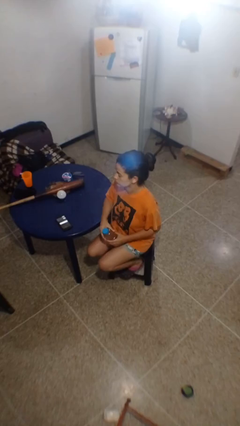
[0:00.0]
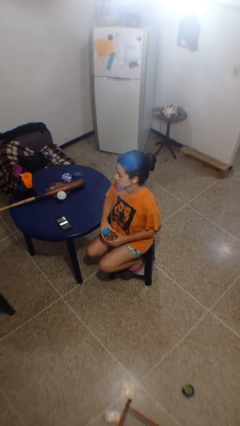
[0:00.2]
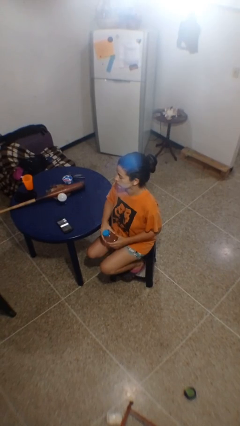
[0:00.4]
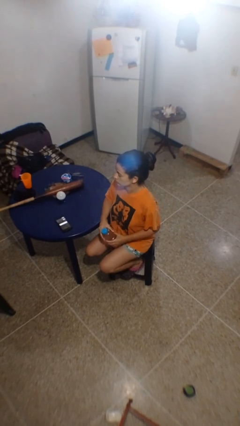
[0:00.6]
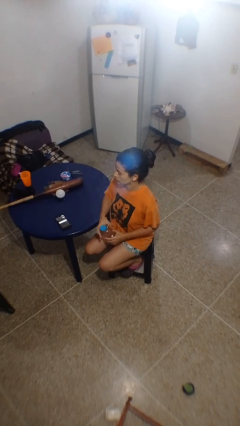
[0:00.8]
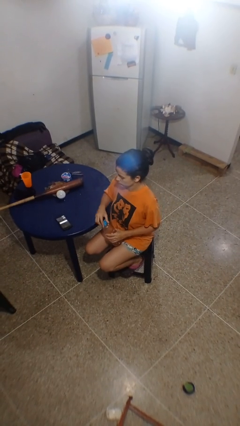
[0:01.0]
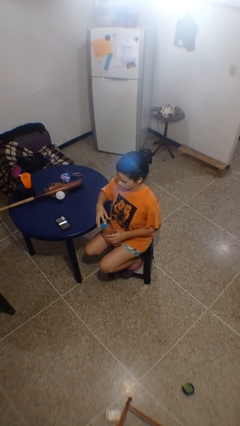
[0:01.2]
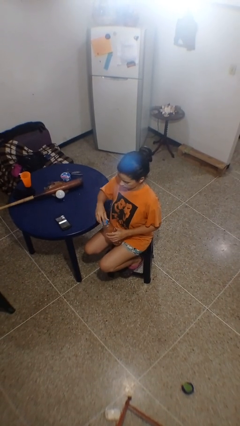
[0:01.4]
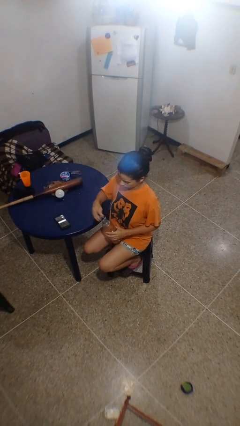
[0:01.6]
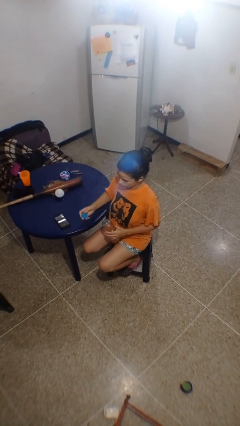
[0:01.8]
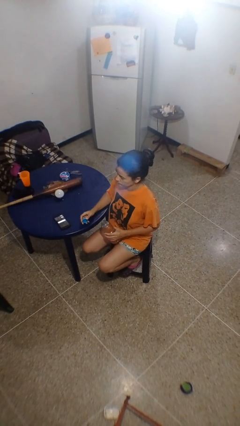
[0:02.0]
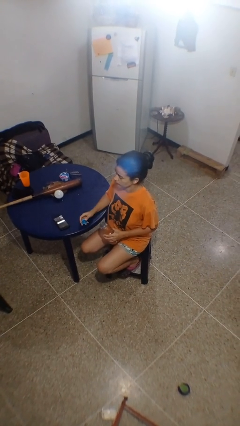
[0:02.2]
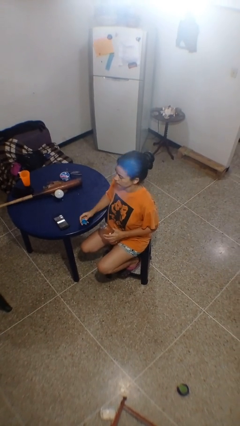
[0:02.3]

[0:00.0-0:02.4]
person unscrews lid from bottle

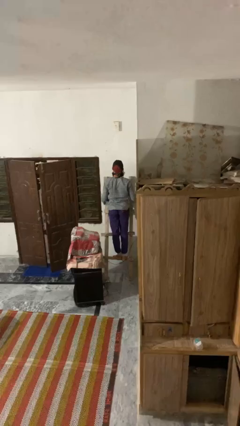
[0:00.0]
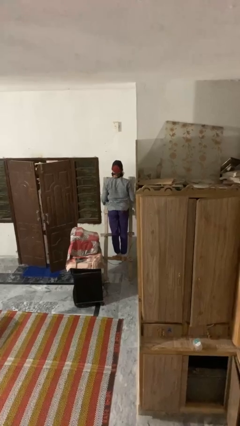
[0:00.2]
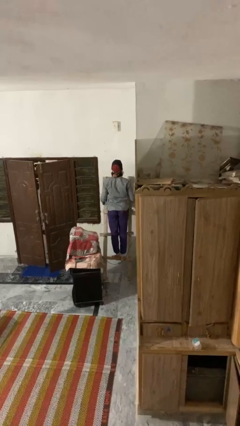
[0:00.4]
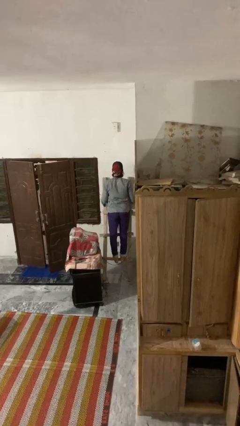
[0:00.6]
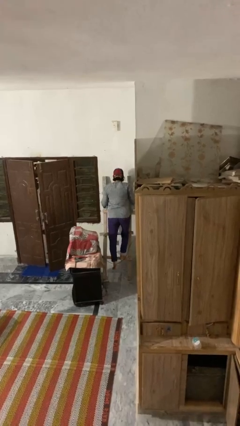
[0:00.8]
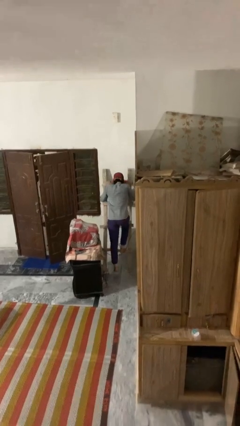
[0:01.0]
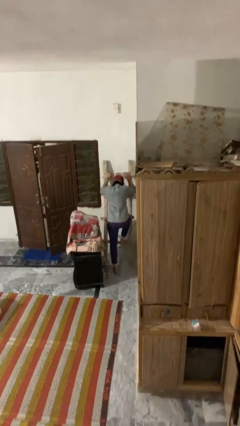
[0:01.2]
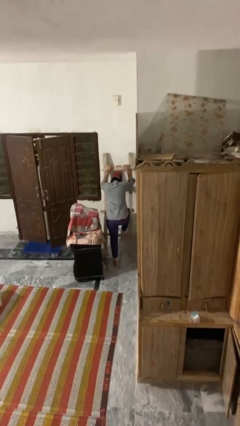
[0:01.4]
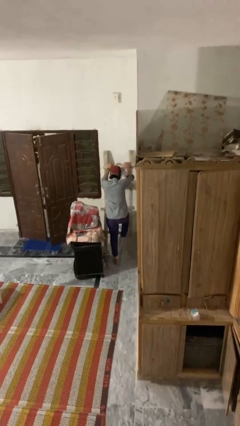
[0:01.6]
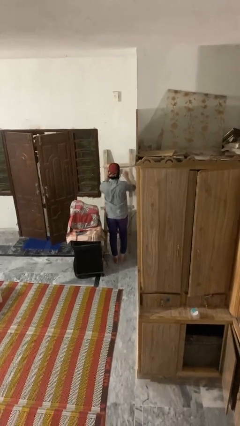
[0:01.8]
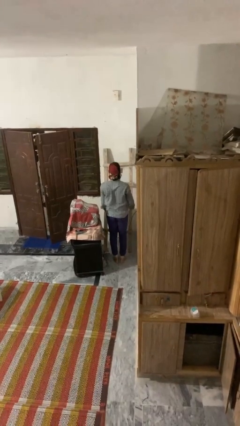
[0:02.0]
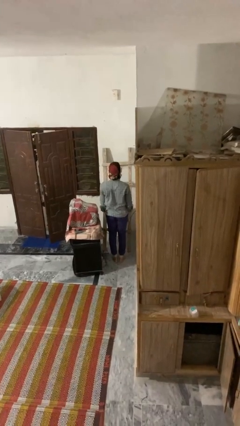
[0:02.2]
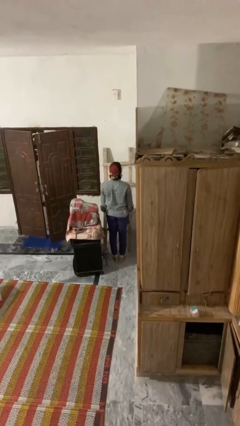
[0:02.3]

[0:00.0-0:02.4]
person climbs down ladder

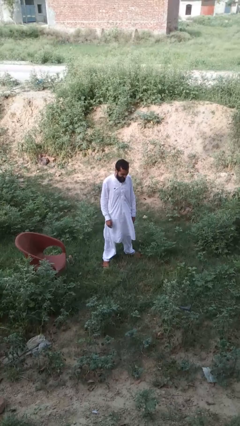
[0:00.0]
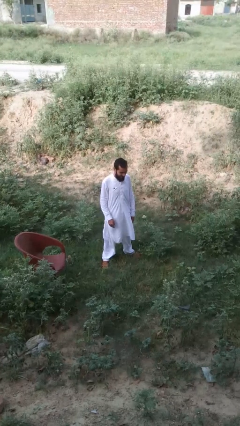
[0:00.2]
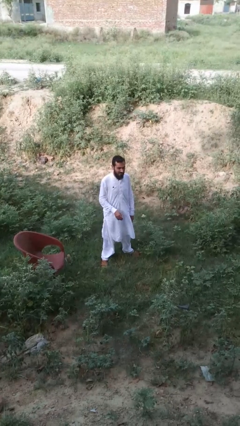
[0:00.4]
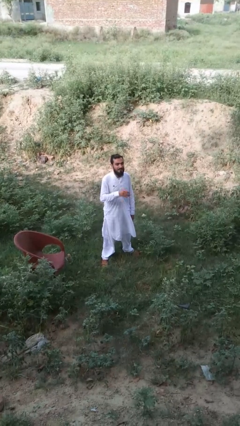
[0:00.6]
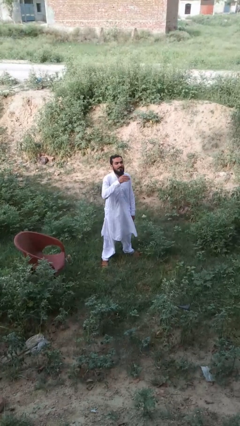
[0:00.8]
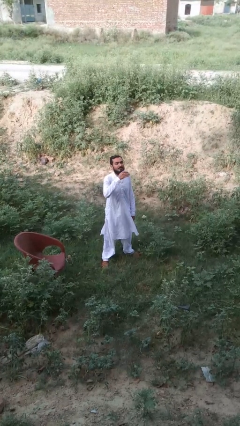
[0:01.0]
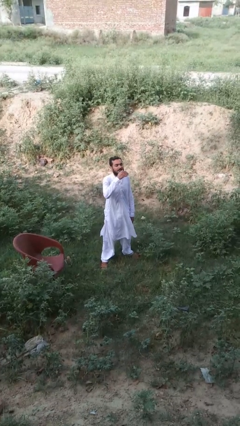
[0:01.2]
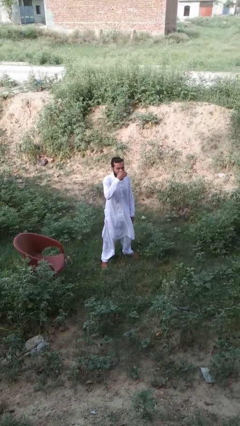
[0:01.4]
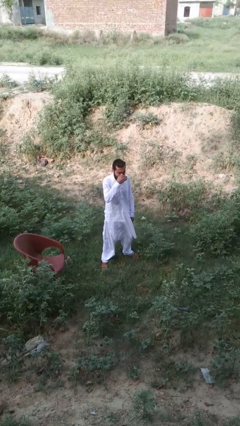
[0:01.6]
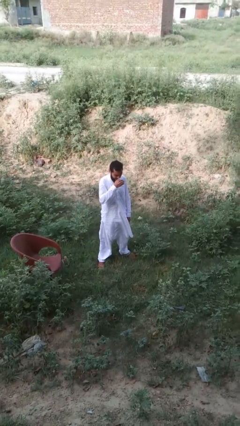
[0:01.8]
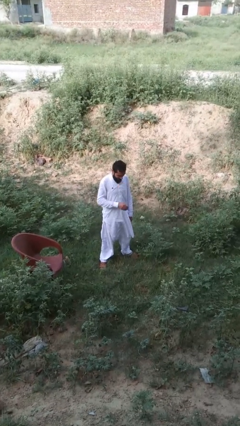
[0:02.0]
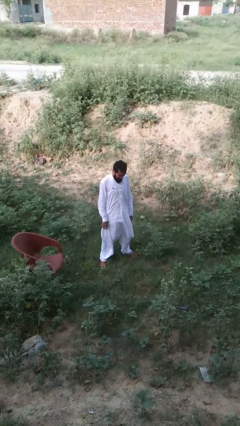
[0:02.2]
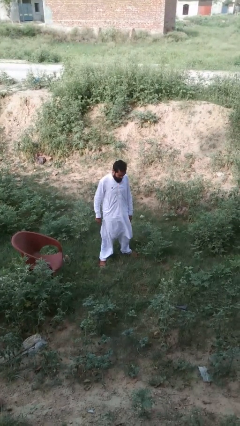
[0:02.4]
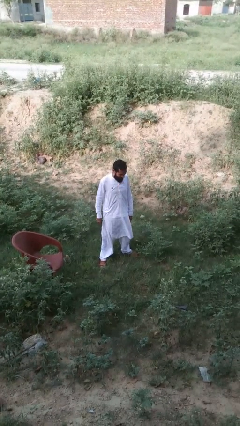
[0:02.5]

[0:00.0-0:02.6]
person sneezes into hand

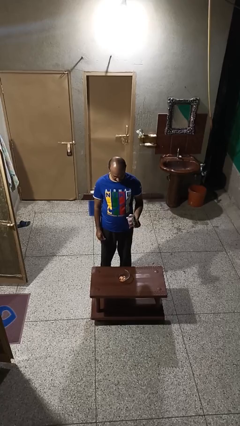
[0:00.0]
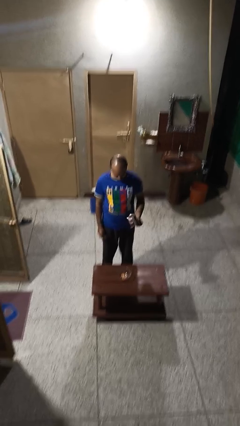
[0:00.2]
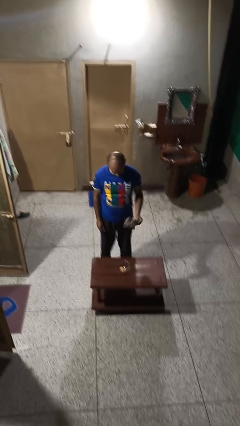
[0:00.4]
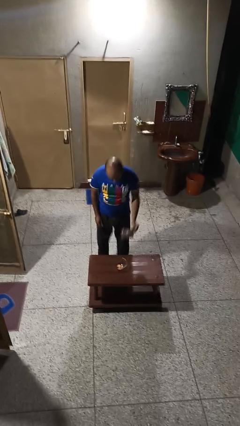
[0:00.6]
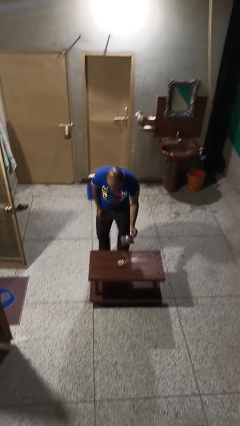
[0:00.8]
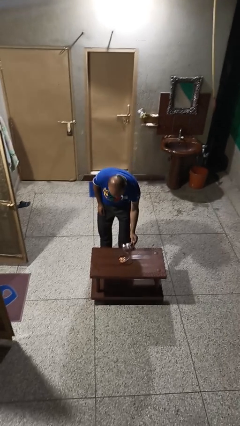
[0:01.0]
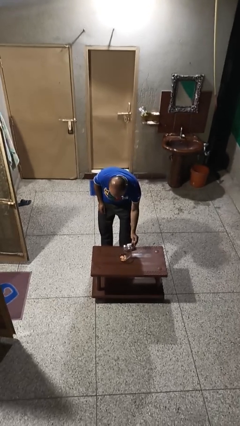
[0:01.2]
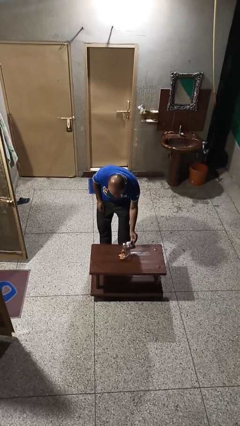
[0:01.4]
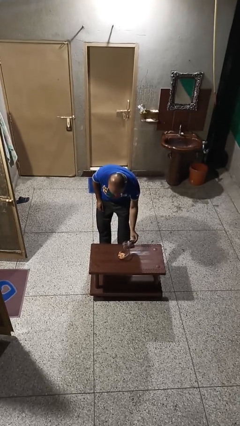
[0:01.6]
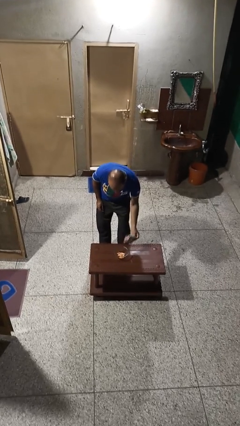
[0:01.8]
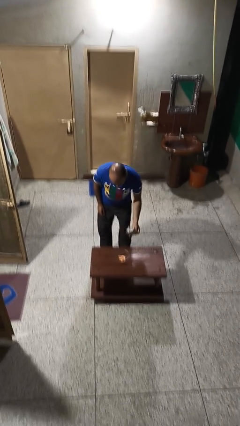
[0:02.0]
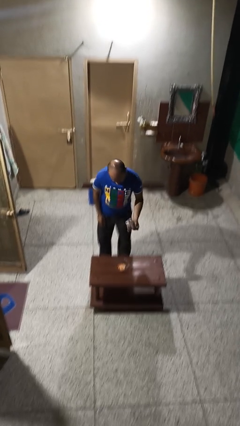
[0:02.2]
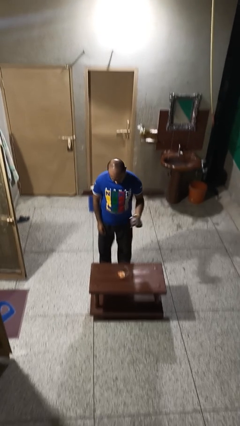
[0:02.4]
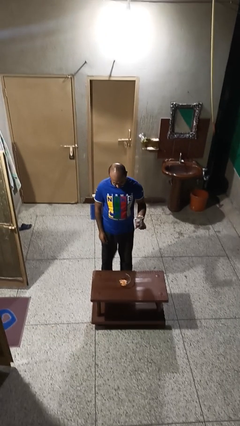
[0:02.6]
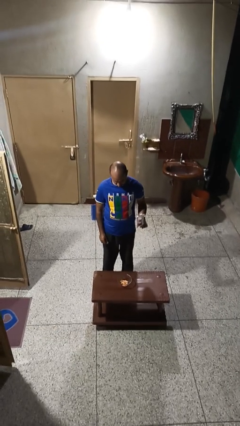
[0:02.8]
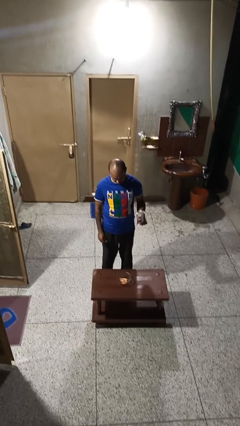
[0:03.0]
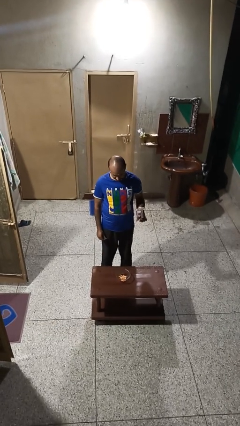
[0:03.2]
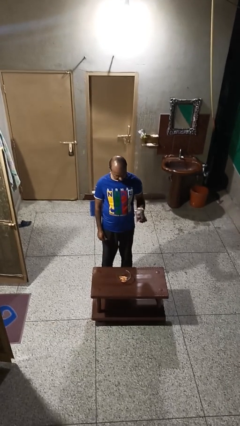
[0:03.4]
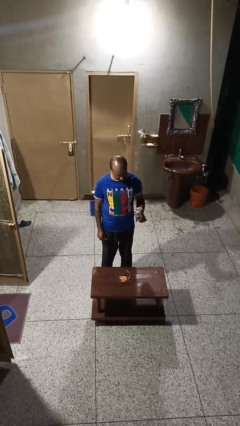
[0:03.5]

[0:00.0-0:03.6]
person pours into bowl

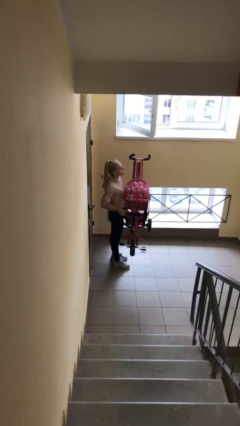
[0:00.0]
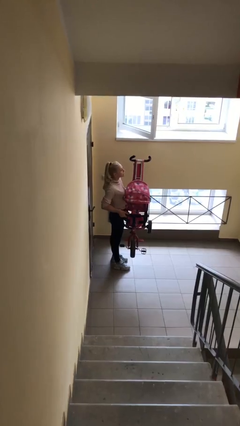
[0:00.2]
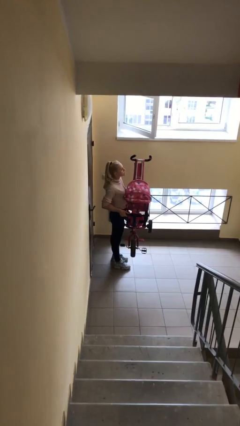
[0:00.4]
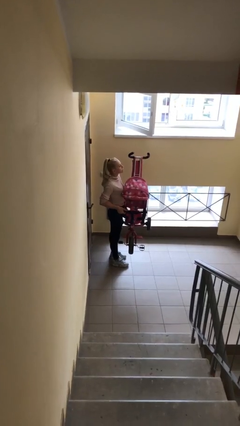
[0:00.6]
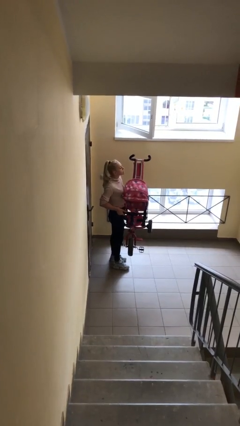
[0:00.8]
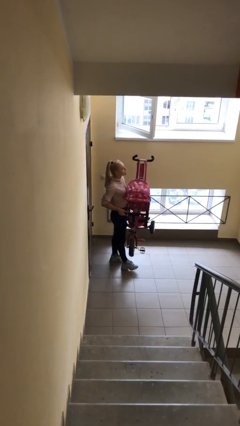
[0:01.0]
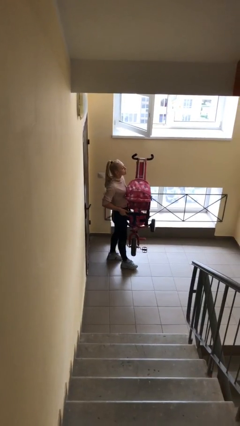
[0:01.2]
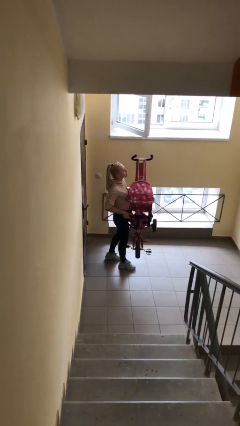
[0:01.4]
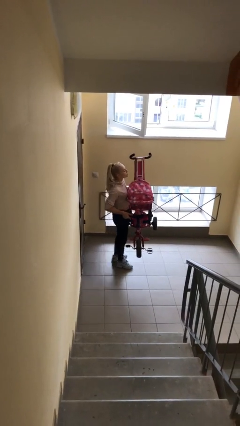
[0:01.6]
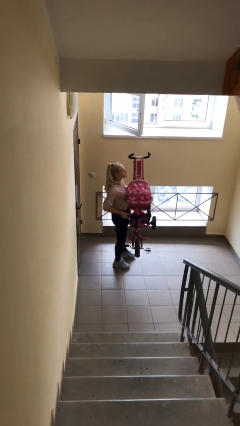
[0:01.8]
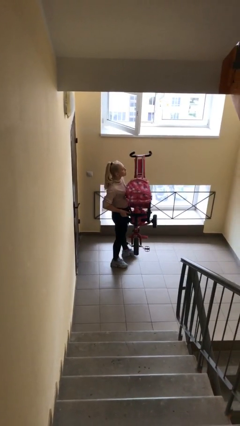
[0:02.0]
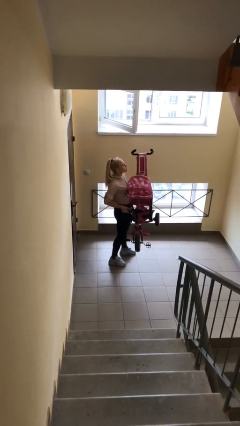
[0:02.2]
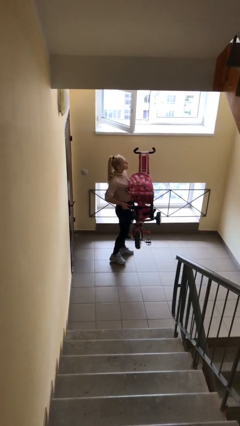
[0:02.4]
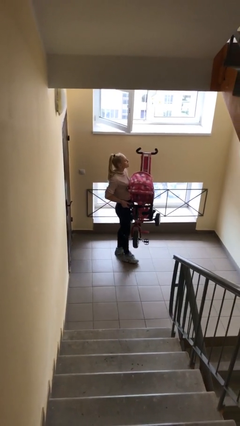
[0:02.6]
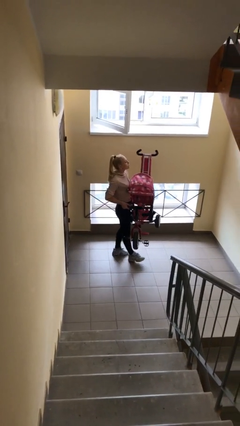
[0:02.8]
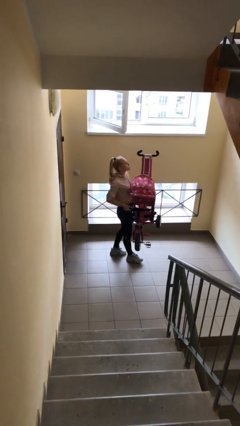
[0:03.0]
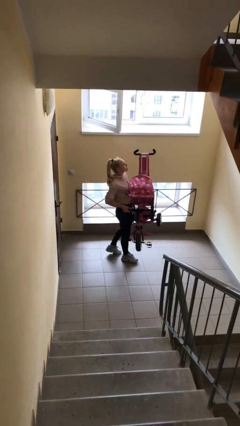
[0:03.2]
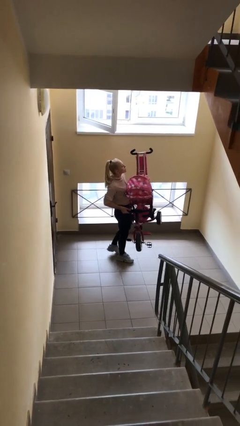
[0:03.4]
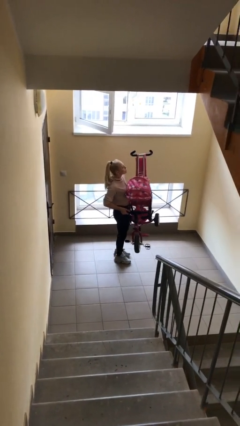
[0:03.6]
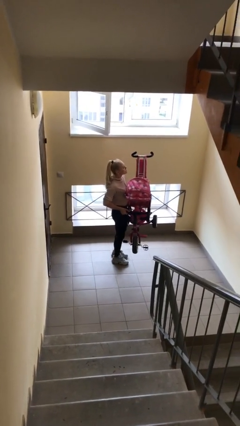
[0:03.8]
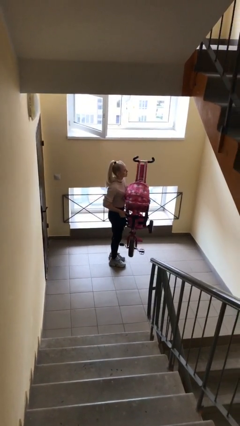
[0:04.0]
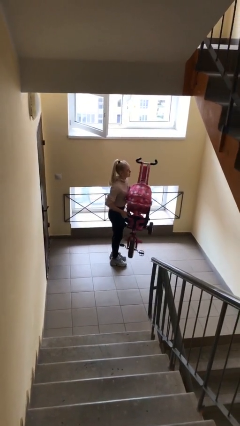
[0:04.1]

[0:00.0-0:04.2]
person carries heavy object

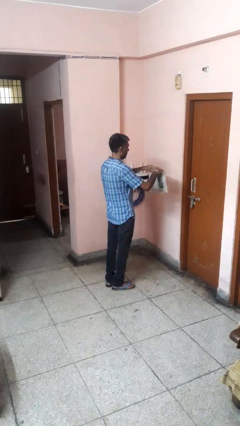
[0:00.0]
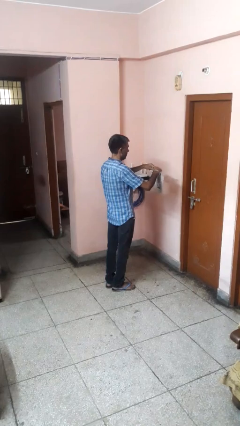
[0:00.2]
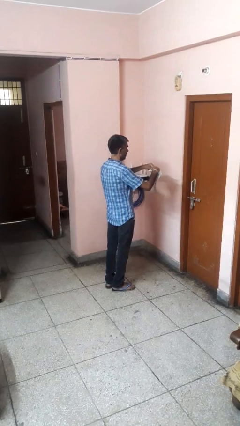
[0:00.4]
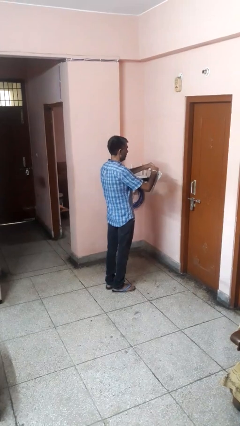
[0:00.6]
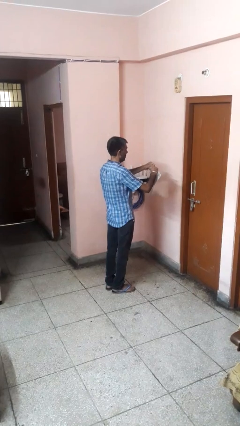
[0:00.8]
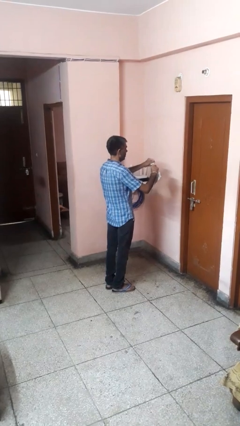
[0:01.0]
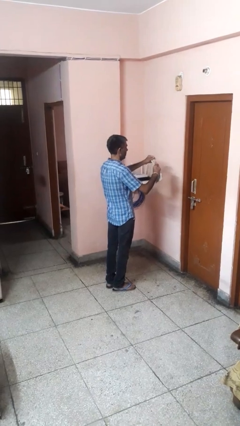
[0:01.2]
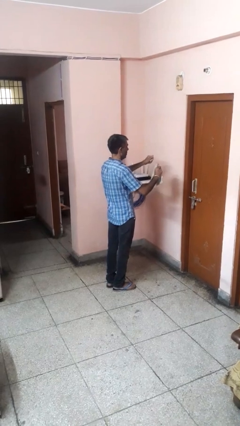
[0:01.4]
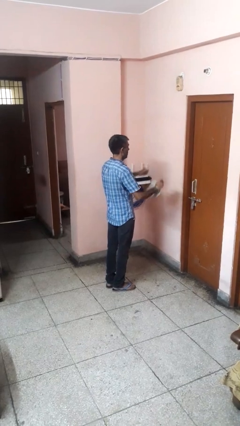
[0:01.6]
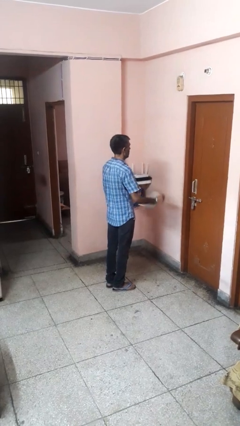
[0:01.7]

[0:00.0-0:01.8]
person tears paper

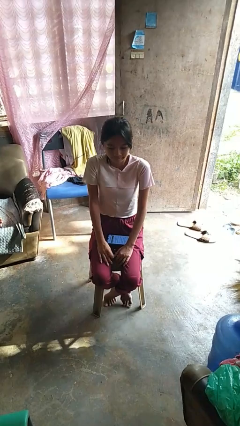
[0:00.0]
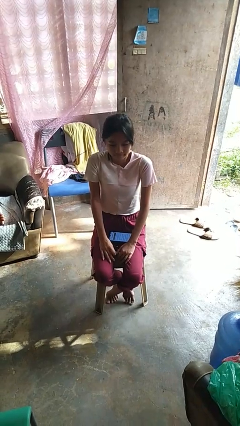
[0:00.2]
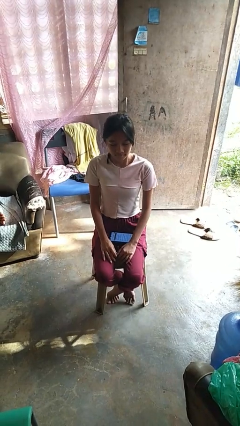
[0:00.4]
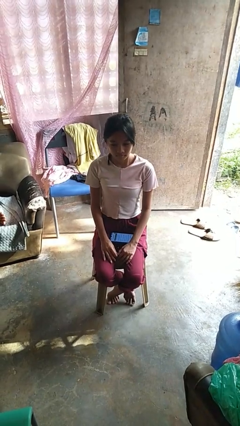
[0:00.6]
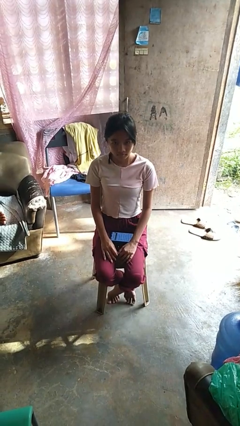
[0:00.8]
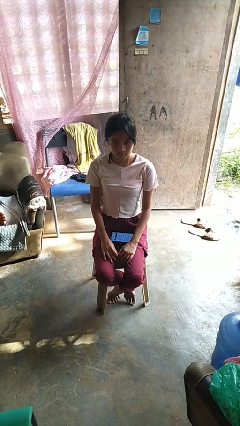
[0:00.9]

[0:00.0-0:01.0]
person shrugs
